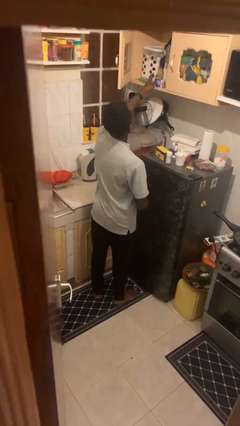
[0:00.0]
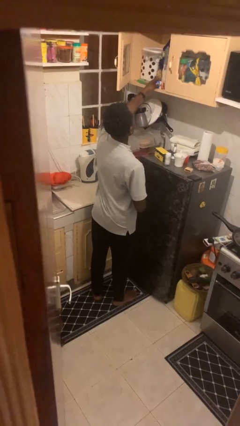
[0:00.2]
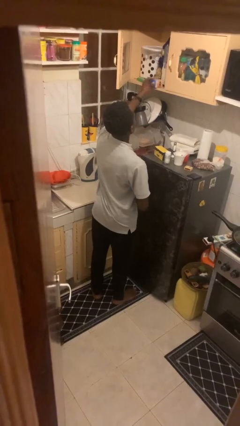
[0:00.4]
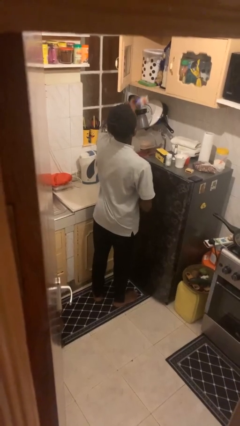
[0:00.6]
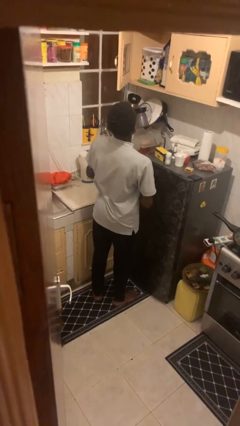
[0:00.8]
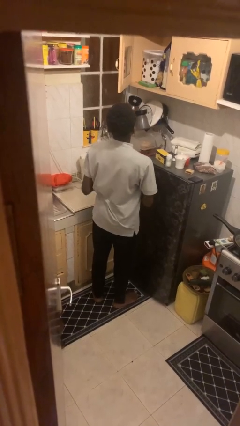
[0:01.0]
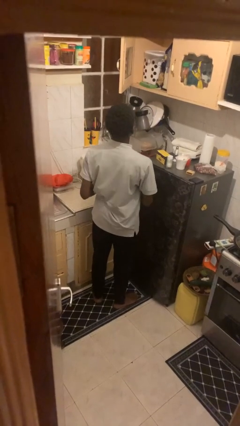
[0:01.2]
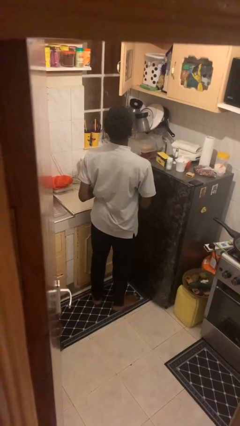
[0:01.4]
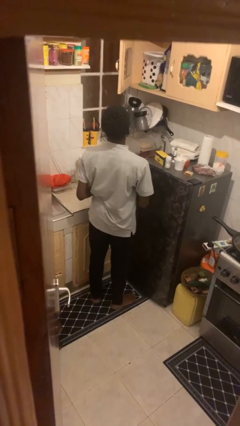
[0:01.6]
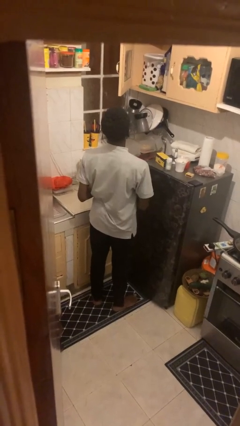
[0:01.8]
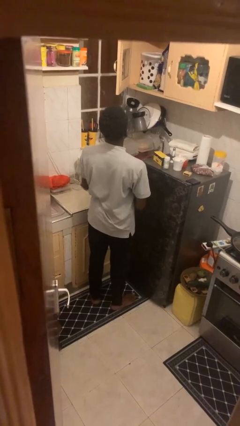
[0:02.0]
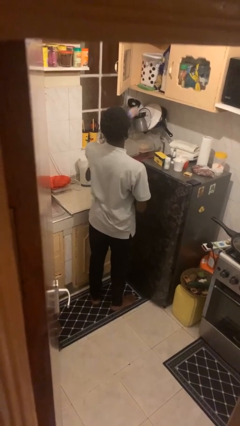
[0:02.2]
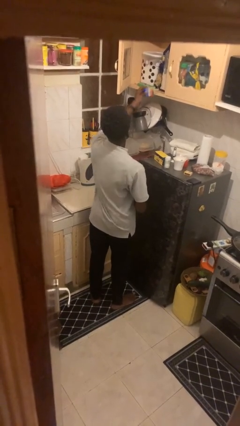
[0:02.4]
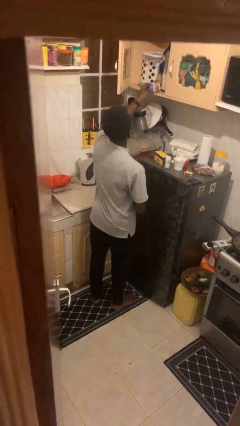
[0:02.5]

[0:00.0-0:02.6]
person picks up object from cabinet

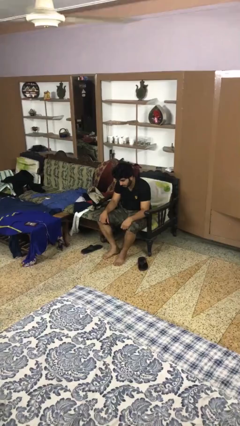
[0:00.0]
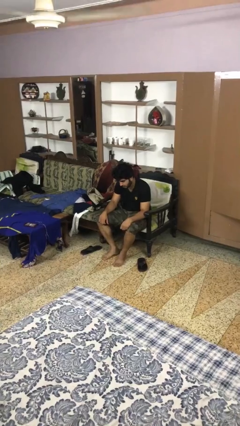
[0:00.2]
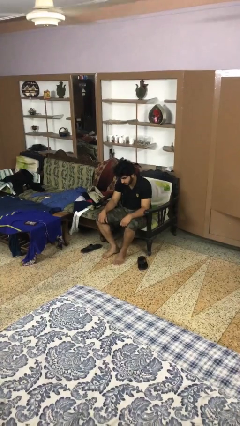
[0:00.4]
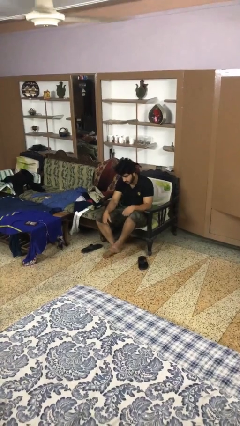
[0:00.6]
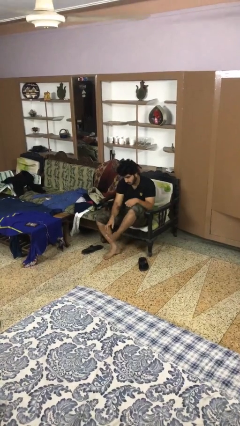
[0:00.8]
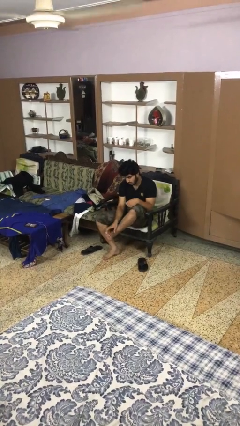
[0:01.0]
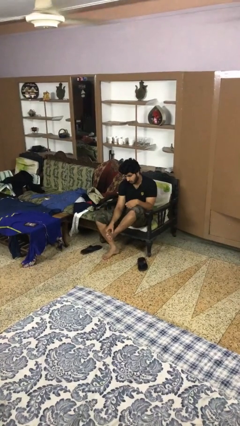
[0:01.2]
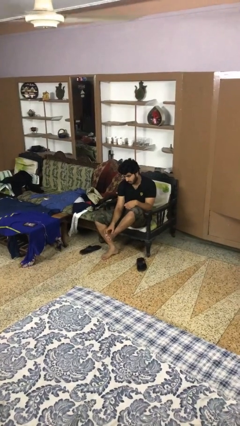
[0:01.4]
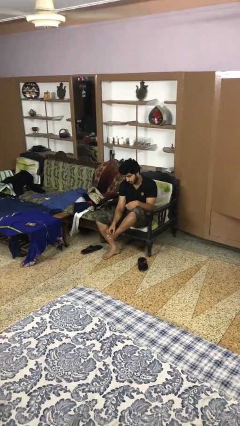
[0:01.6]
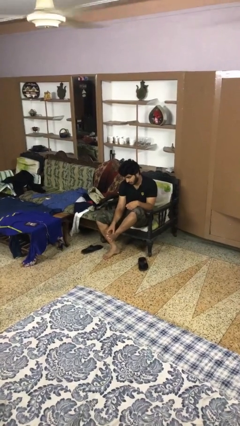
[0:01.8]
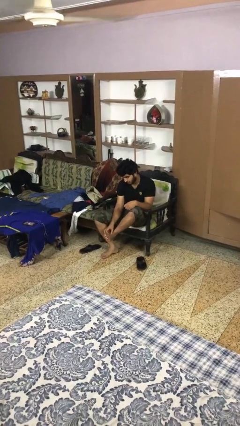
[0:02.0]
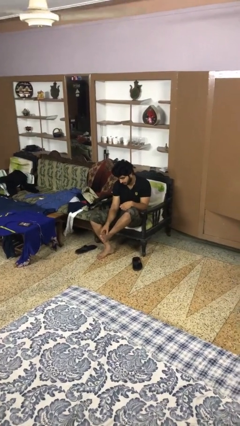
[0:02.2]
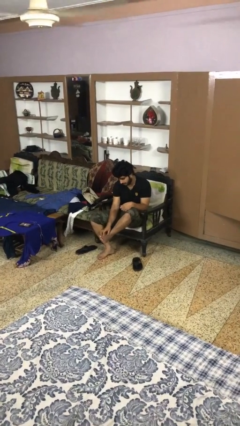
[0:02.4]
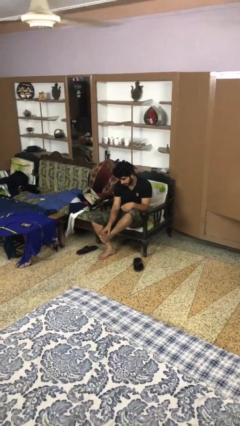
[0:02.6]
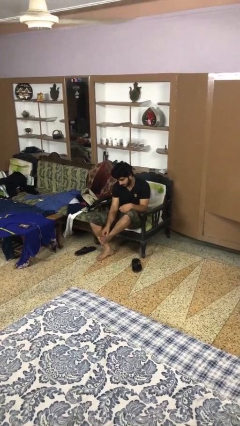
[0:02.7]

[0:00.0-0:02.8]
person rubs foot

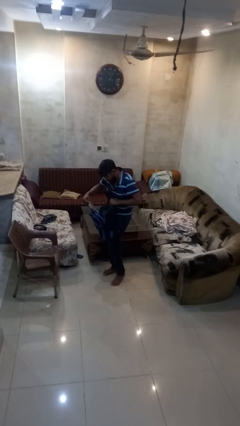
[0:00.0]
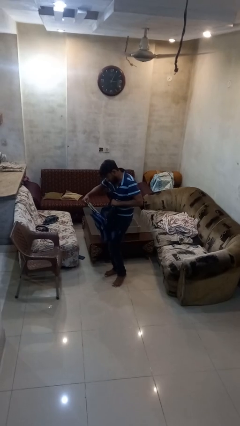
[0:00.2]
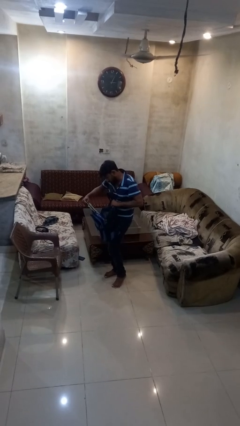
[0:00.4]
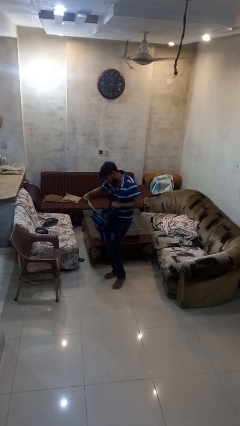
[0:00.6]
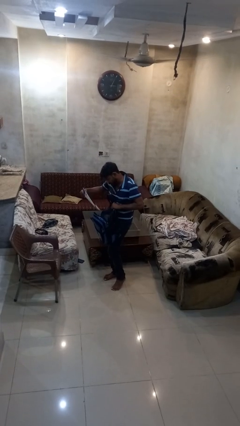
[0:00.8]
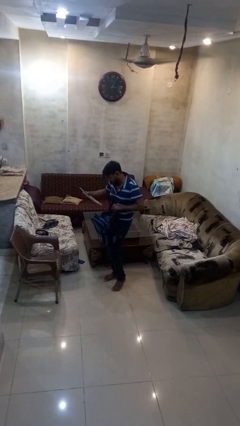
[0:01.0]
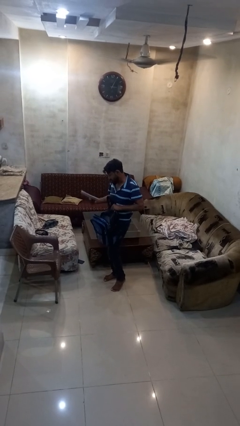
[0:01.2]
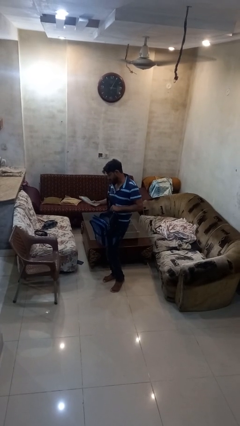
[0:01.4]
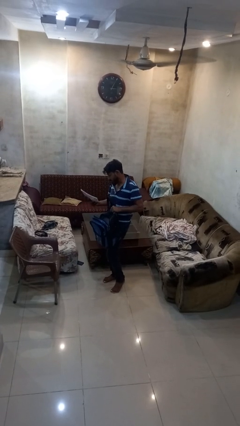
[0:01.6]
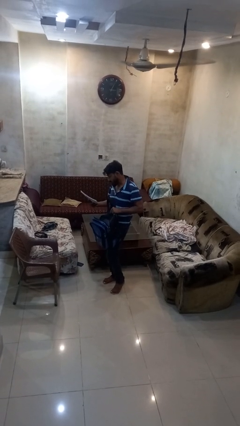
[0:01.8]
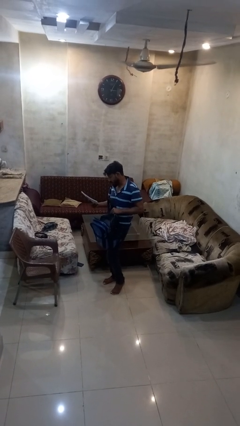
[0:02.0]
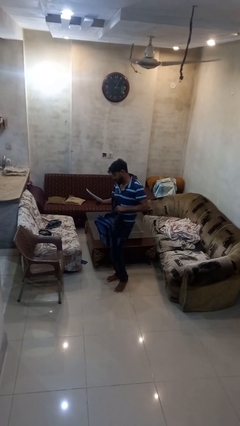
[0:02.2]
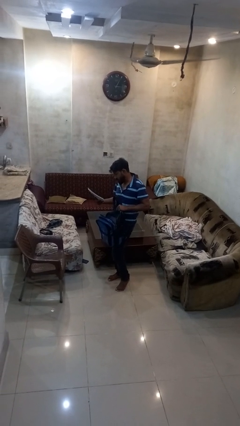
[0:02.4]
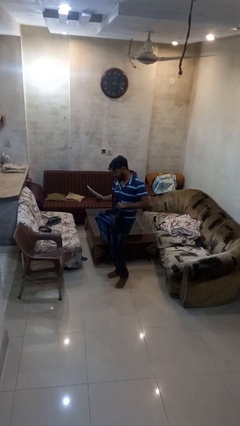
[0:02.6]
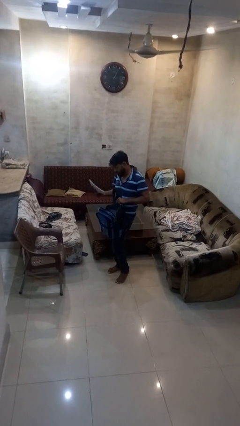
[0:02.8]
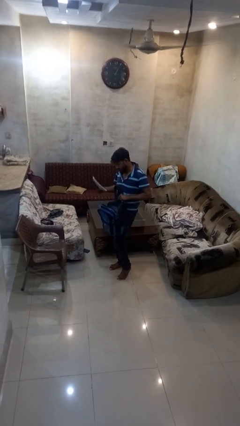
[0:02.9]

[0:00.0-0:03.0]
person takes object from backpack

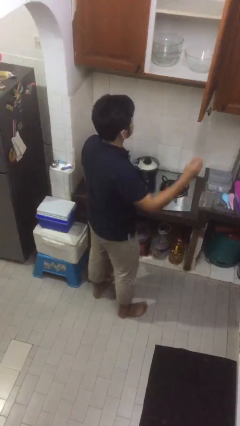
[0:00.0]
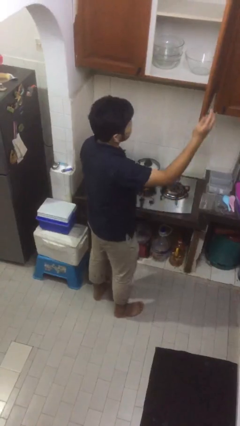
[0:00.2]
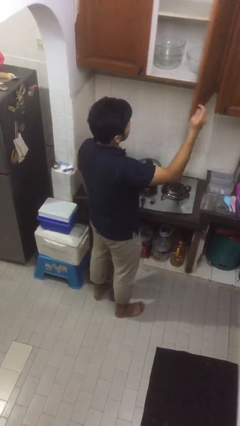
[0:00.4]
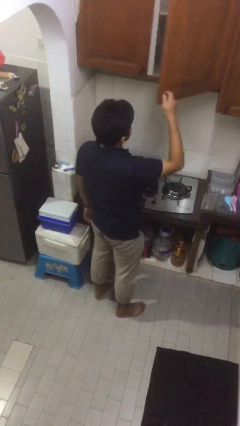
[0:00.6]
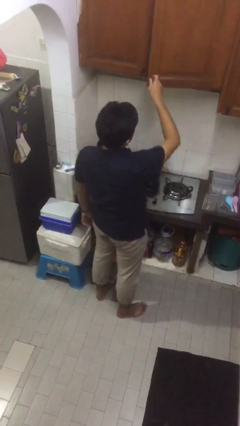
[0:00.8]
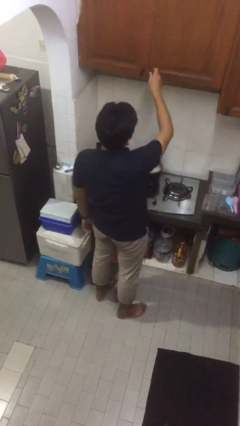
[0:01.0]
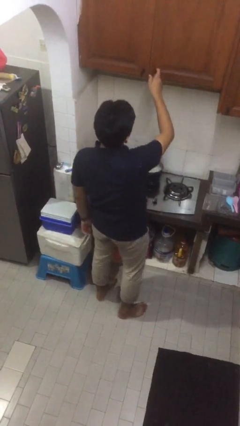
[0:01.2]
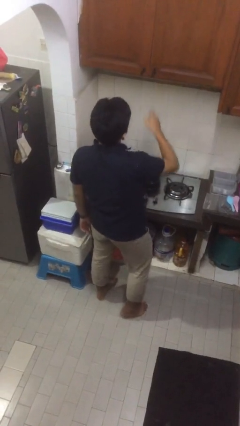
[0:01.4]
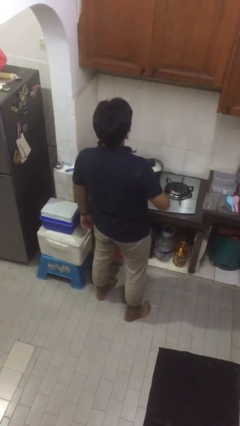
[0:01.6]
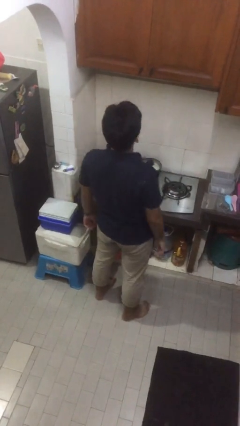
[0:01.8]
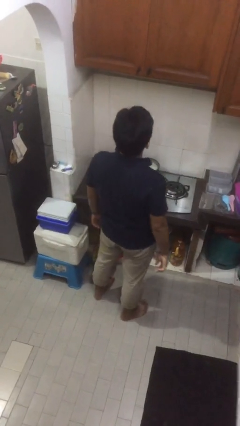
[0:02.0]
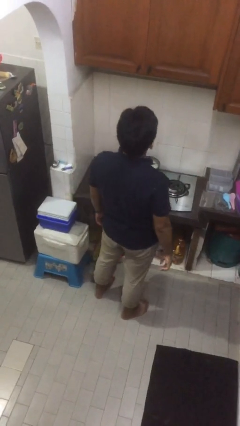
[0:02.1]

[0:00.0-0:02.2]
person closes cabinet

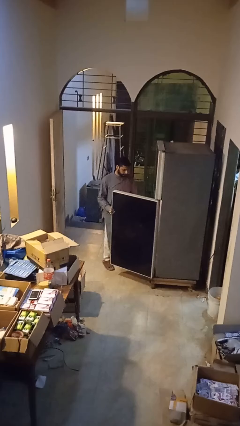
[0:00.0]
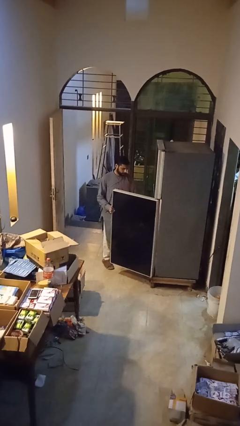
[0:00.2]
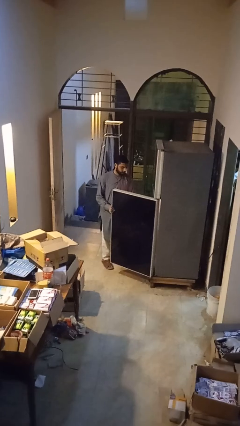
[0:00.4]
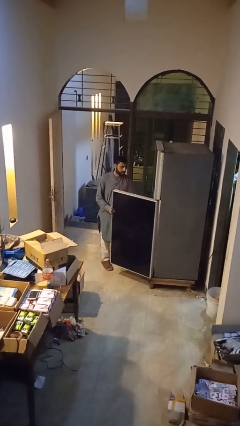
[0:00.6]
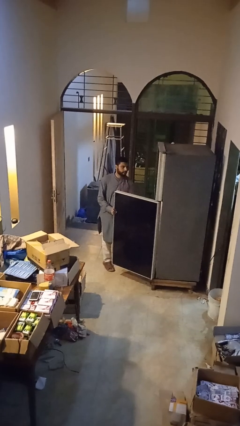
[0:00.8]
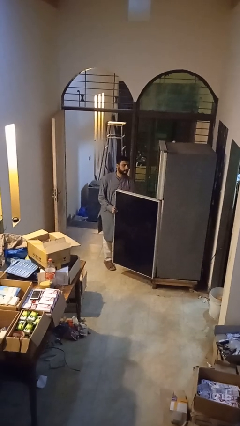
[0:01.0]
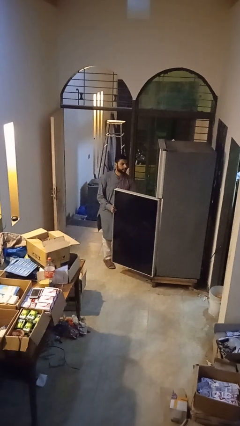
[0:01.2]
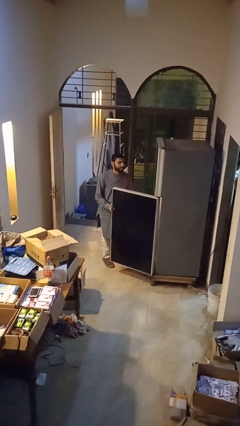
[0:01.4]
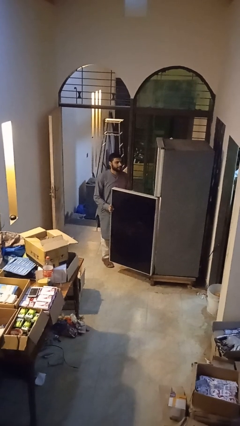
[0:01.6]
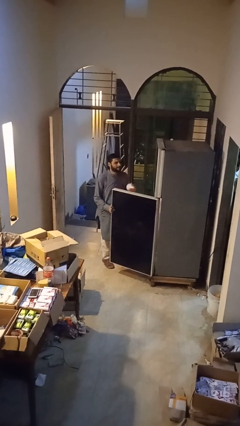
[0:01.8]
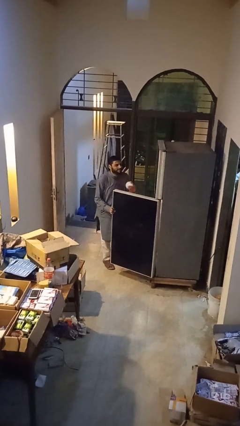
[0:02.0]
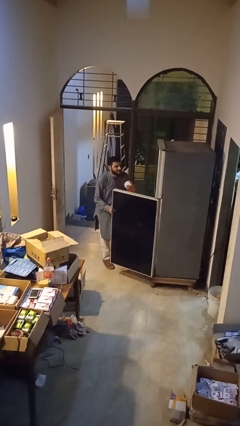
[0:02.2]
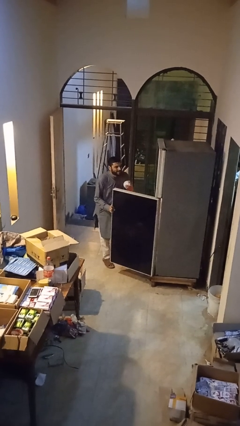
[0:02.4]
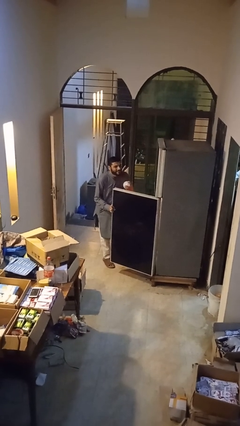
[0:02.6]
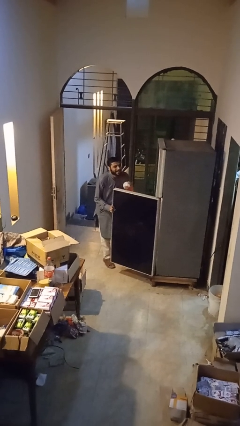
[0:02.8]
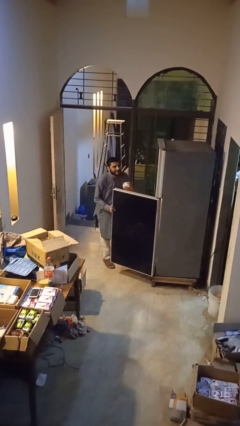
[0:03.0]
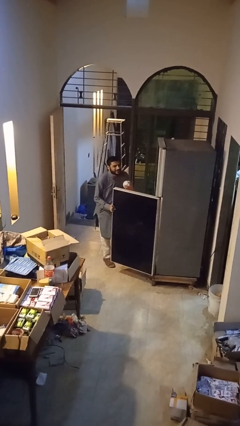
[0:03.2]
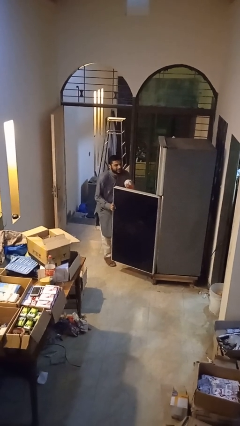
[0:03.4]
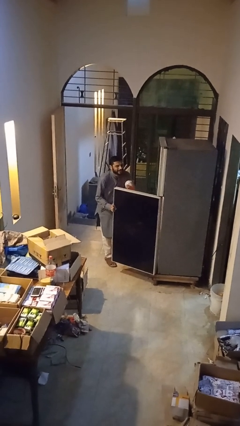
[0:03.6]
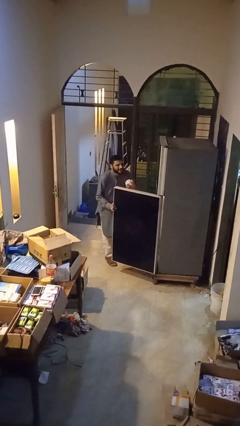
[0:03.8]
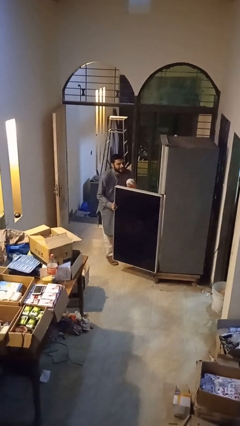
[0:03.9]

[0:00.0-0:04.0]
person puts object into refrigerator

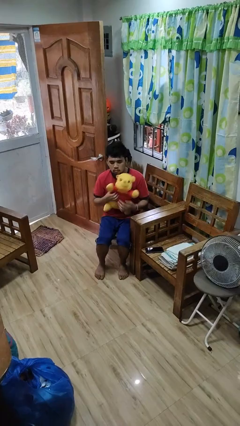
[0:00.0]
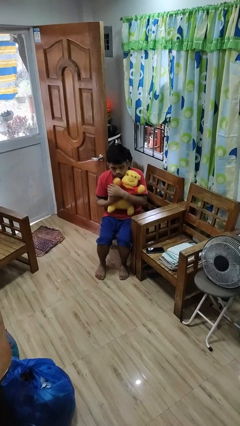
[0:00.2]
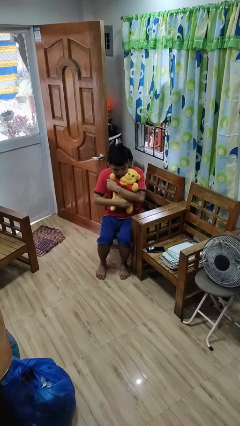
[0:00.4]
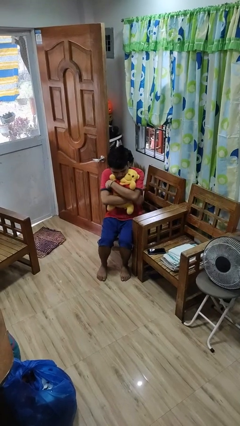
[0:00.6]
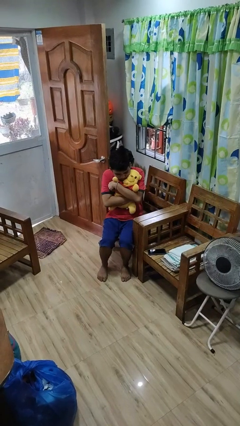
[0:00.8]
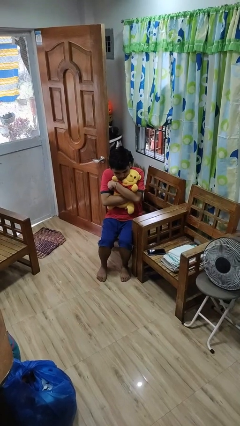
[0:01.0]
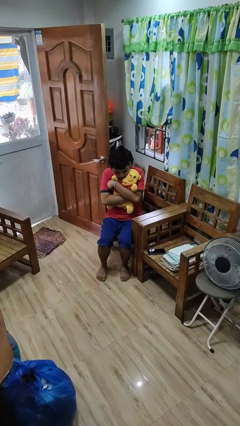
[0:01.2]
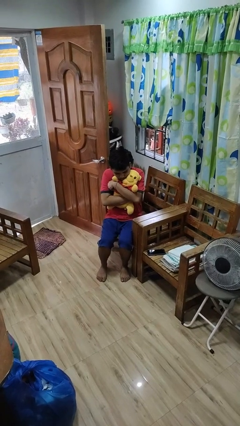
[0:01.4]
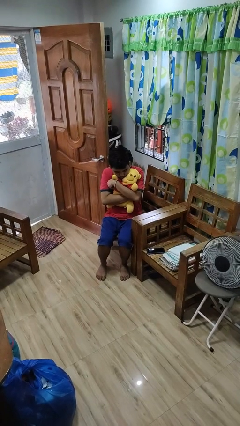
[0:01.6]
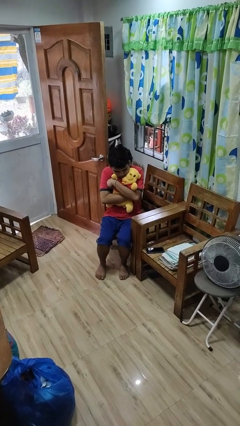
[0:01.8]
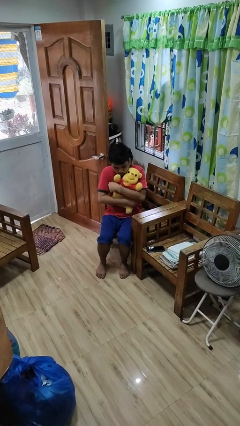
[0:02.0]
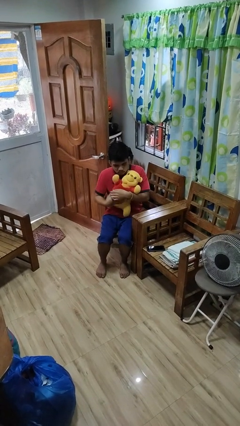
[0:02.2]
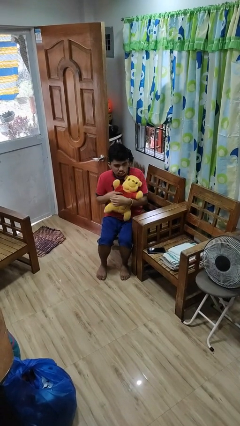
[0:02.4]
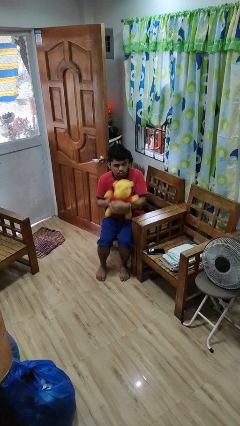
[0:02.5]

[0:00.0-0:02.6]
person hugs stuffed animal

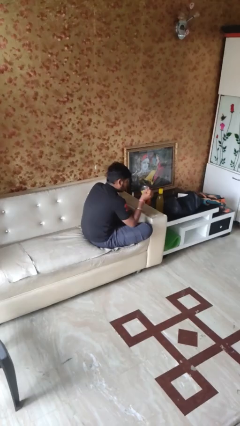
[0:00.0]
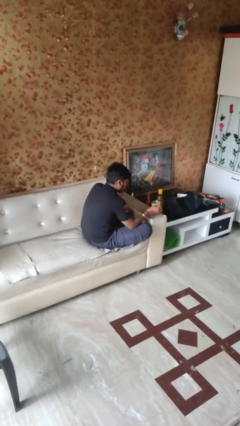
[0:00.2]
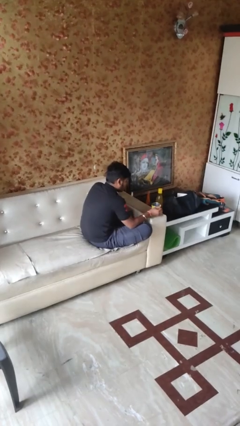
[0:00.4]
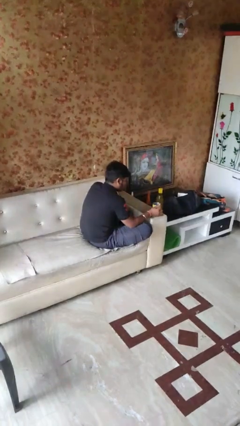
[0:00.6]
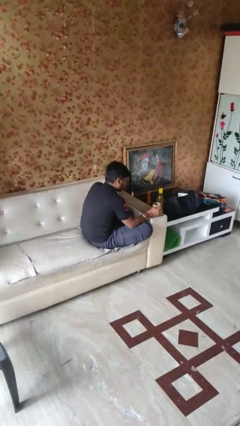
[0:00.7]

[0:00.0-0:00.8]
person puts down object on table
